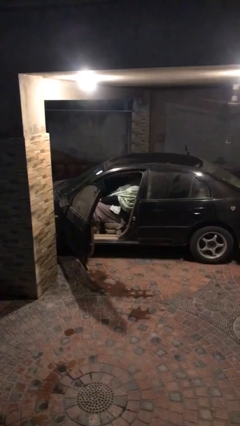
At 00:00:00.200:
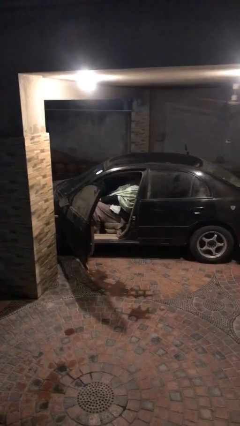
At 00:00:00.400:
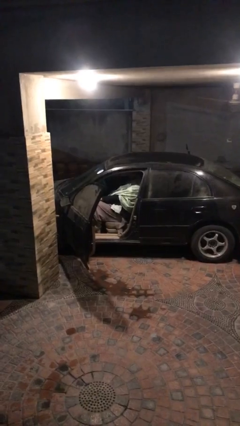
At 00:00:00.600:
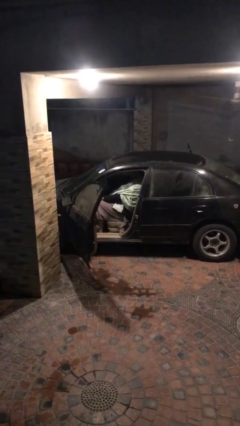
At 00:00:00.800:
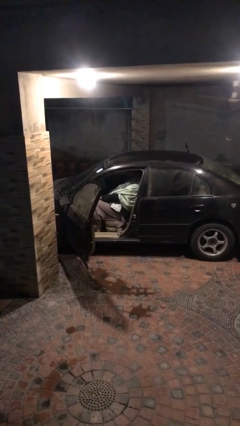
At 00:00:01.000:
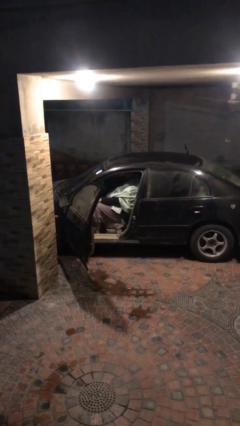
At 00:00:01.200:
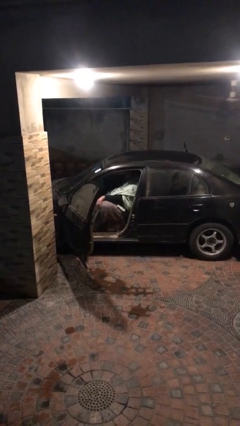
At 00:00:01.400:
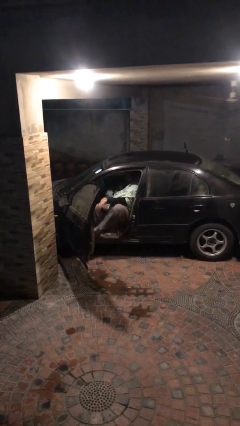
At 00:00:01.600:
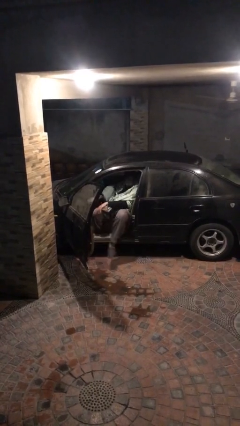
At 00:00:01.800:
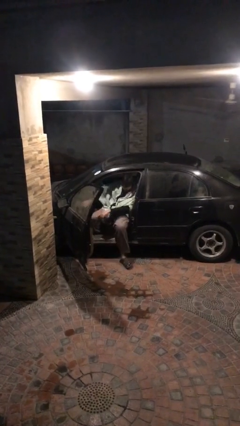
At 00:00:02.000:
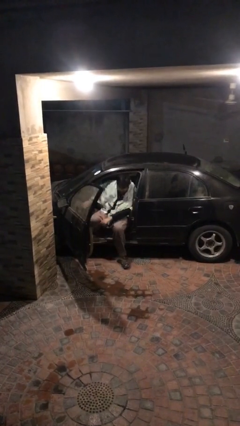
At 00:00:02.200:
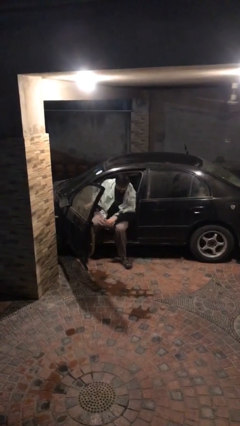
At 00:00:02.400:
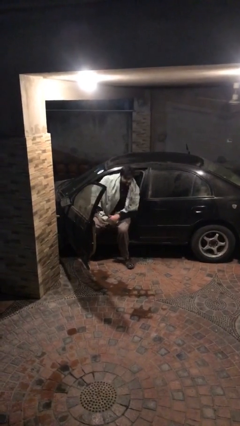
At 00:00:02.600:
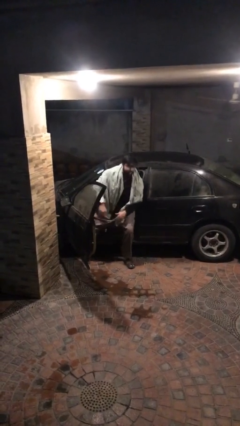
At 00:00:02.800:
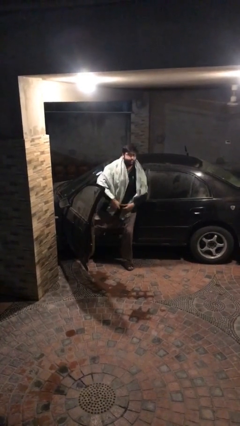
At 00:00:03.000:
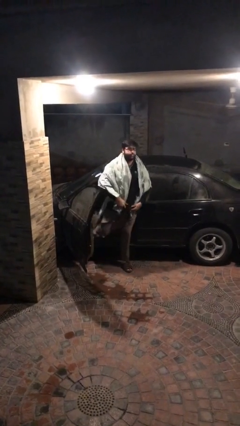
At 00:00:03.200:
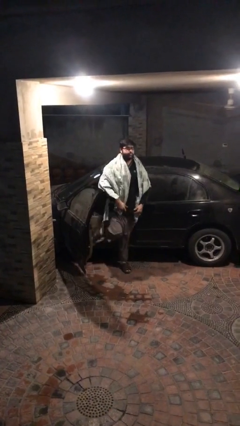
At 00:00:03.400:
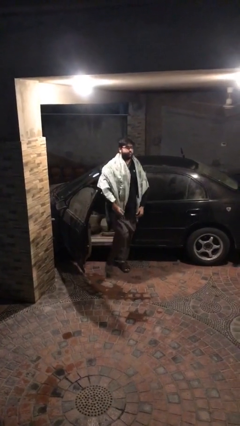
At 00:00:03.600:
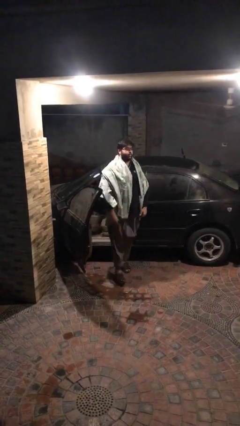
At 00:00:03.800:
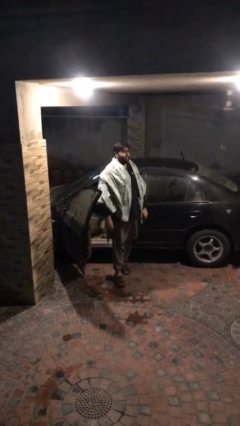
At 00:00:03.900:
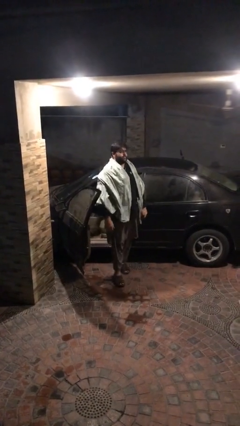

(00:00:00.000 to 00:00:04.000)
person exits car

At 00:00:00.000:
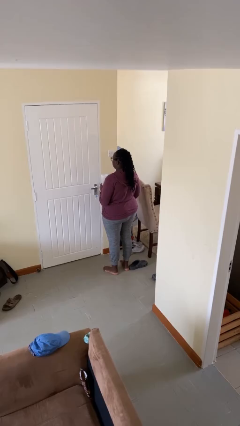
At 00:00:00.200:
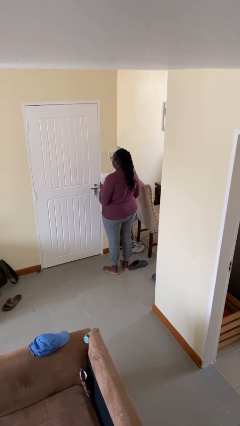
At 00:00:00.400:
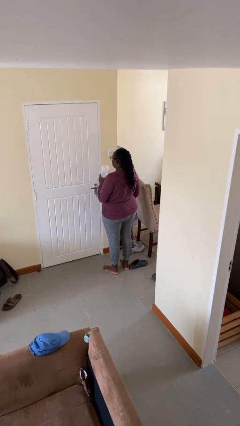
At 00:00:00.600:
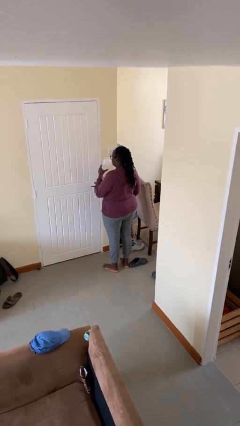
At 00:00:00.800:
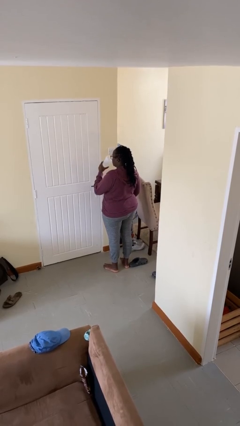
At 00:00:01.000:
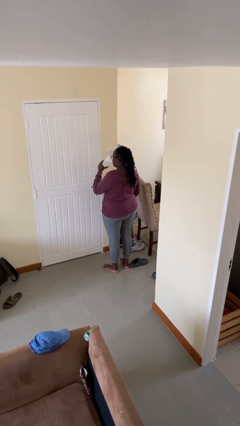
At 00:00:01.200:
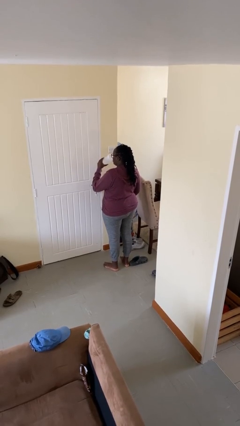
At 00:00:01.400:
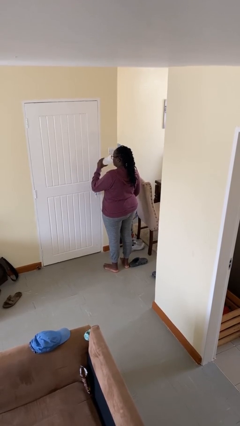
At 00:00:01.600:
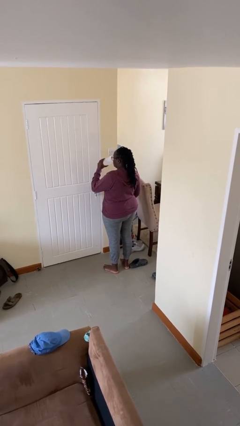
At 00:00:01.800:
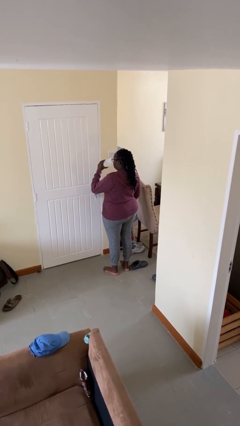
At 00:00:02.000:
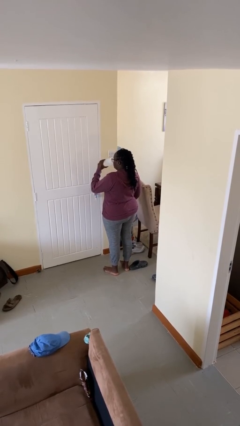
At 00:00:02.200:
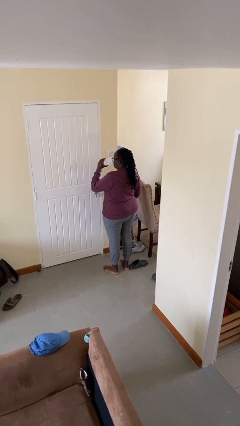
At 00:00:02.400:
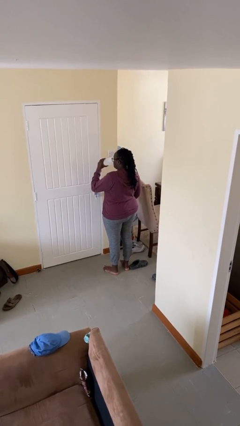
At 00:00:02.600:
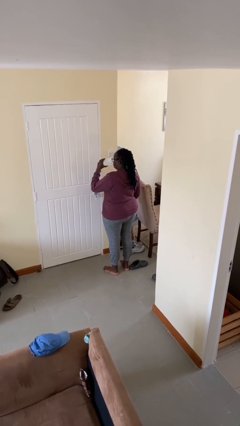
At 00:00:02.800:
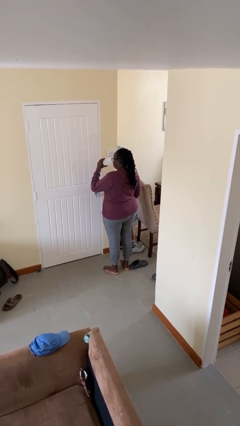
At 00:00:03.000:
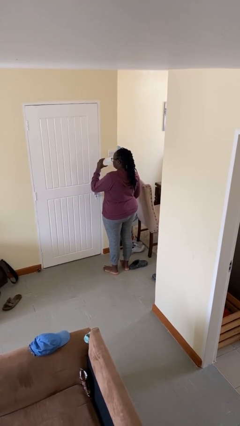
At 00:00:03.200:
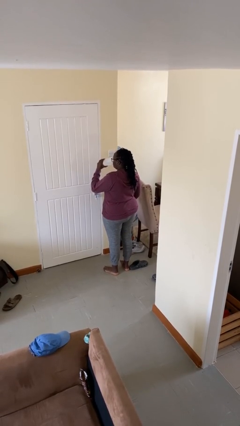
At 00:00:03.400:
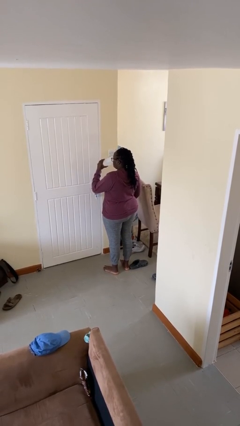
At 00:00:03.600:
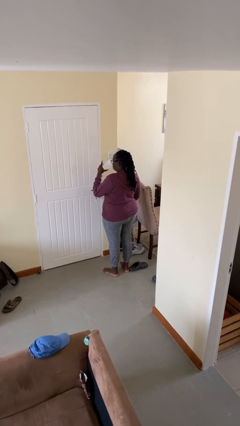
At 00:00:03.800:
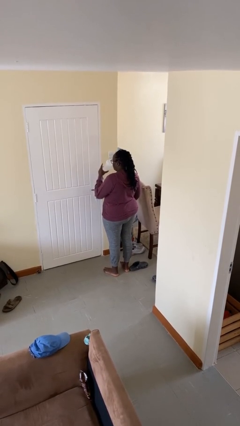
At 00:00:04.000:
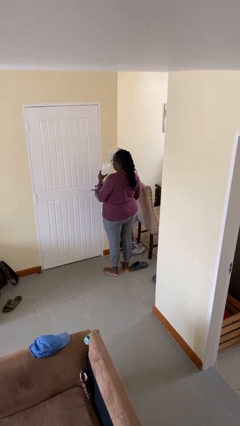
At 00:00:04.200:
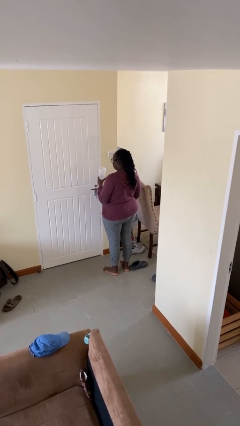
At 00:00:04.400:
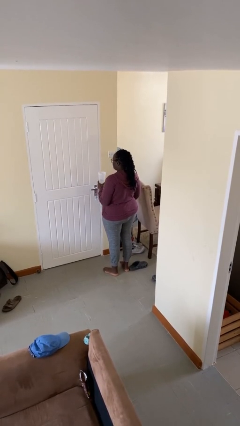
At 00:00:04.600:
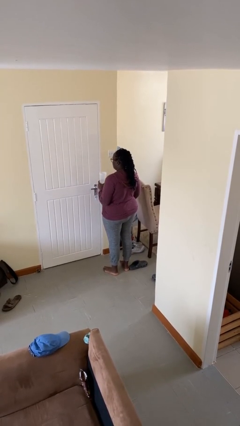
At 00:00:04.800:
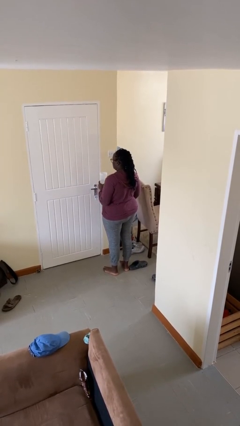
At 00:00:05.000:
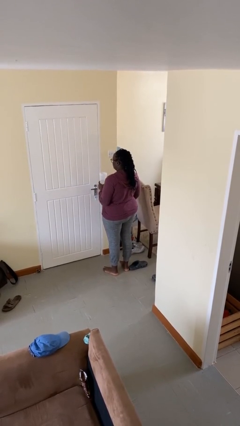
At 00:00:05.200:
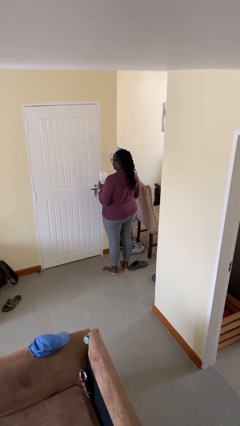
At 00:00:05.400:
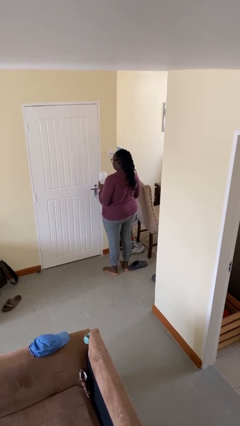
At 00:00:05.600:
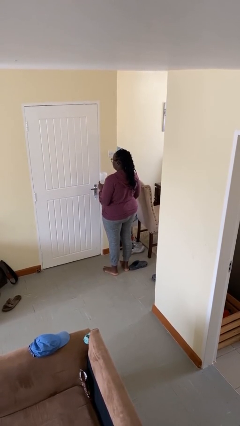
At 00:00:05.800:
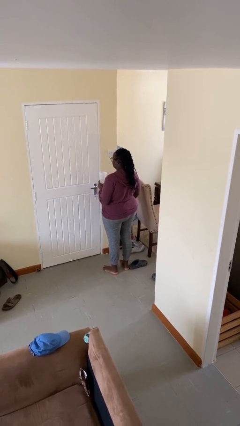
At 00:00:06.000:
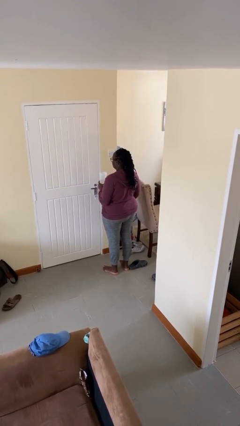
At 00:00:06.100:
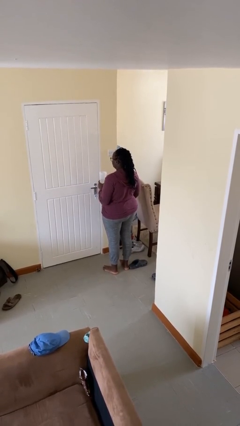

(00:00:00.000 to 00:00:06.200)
person drinks from bottle

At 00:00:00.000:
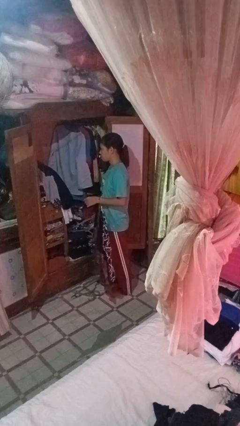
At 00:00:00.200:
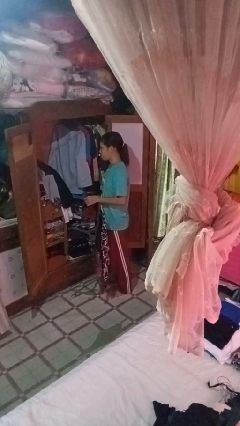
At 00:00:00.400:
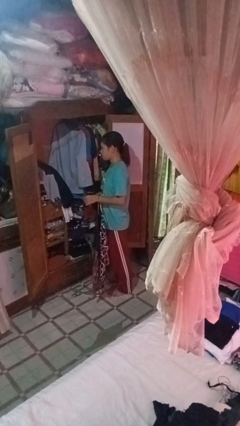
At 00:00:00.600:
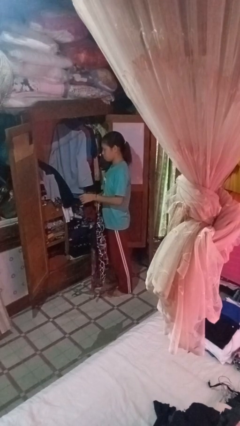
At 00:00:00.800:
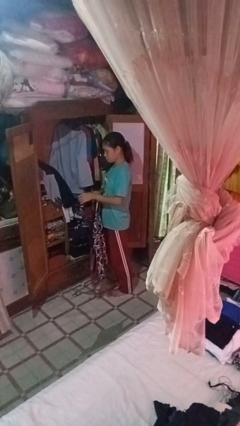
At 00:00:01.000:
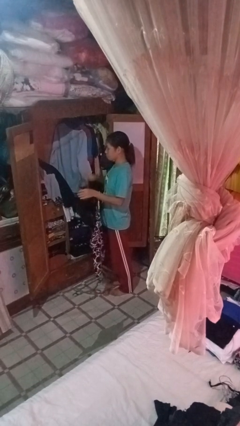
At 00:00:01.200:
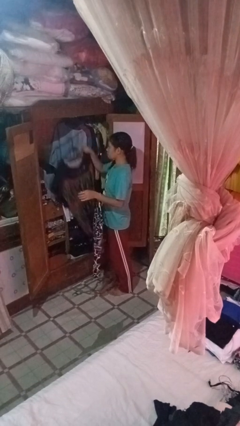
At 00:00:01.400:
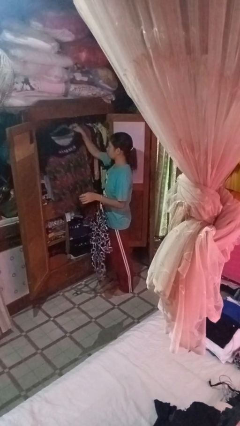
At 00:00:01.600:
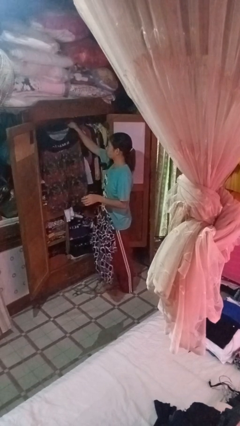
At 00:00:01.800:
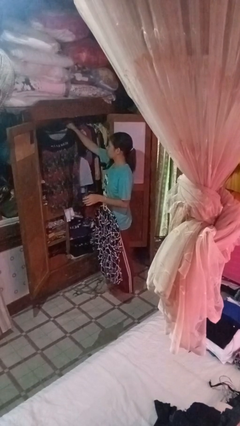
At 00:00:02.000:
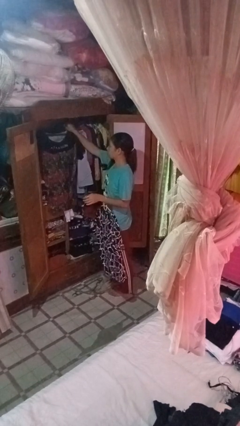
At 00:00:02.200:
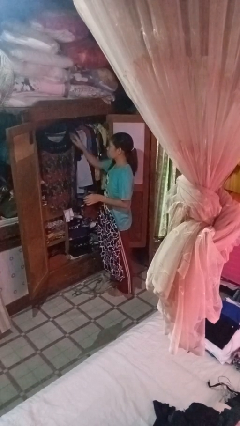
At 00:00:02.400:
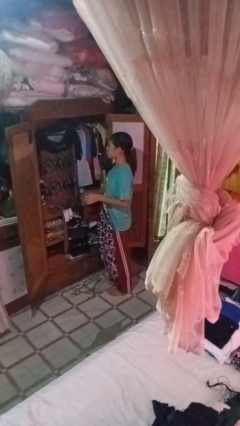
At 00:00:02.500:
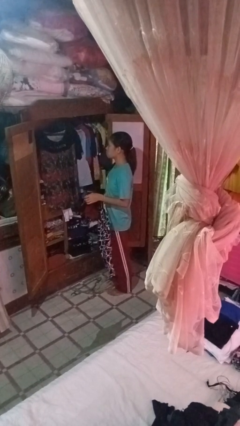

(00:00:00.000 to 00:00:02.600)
person puts clothes into closet

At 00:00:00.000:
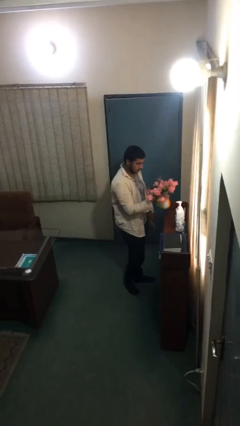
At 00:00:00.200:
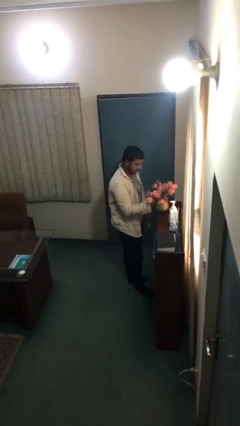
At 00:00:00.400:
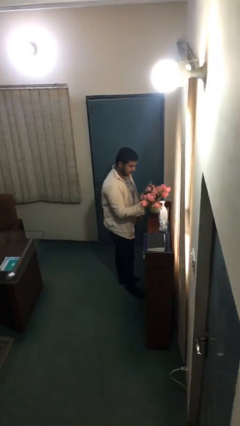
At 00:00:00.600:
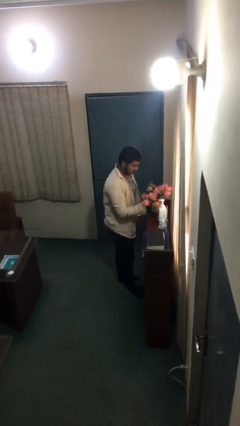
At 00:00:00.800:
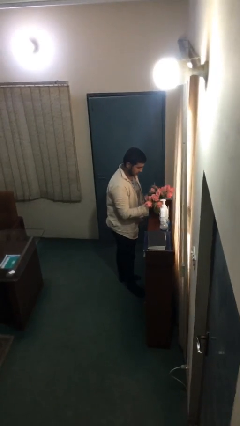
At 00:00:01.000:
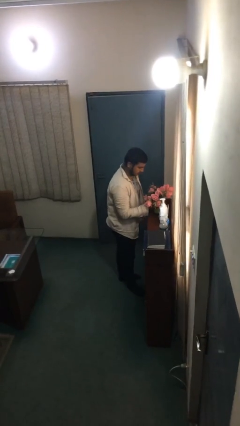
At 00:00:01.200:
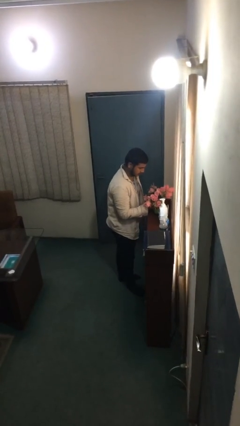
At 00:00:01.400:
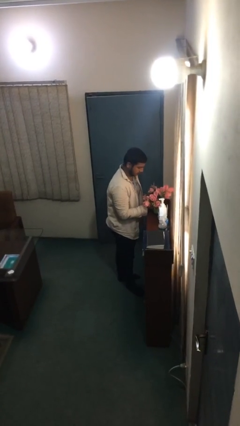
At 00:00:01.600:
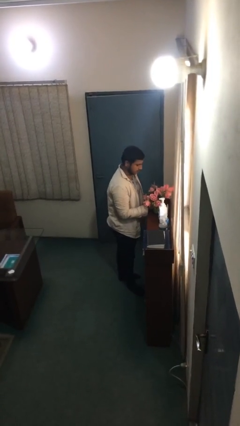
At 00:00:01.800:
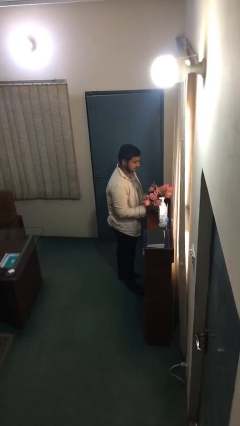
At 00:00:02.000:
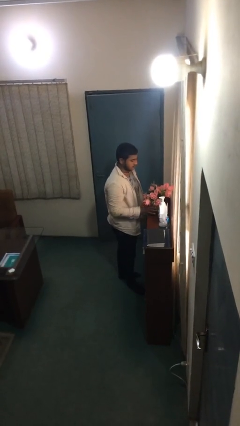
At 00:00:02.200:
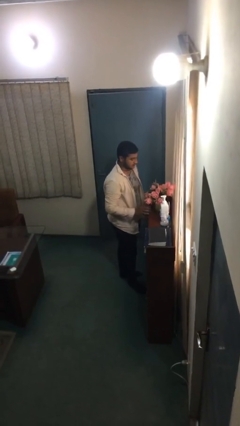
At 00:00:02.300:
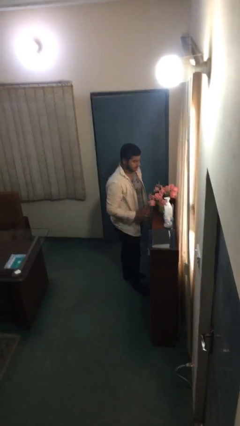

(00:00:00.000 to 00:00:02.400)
person puts down object on shelf

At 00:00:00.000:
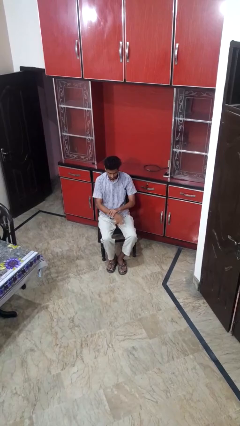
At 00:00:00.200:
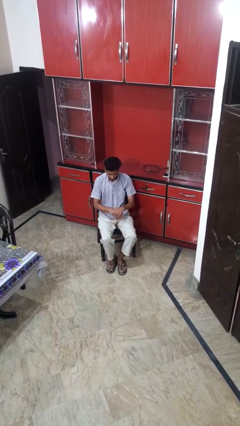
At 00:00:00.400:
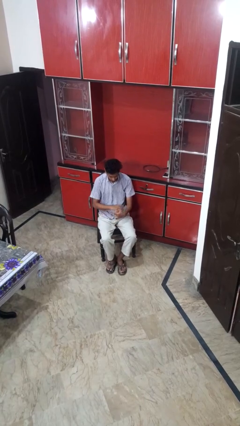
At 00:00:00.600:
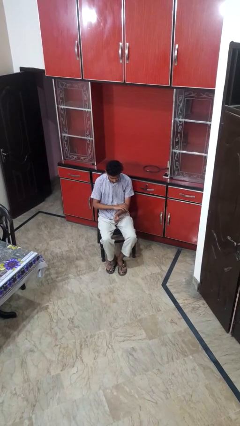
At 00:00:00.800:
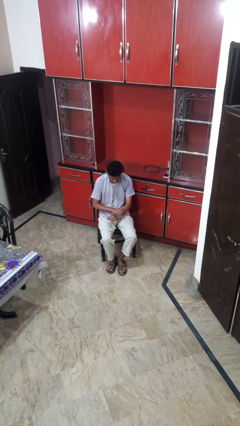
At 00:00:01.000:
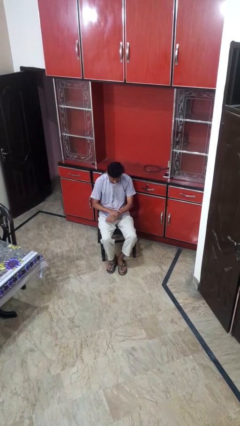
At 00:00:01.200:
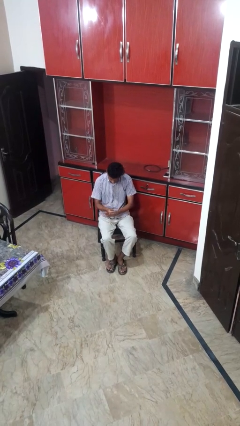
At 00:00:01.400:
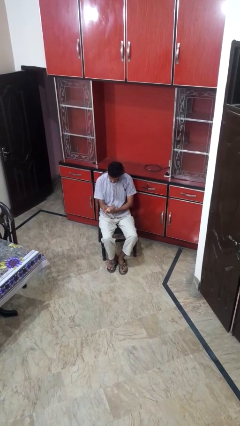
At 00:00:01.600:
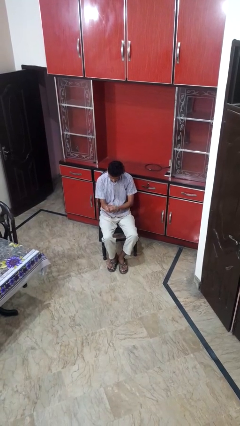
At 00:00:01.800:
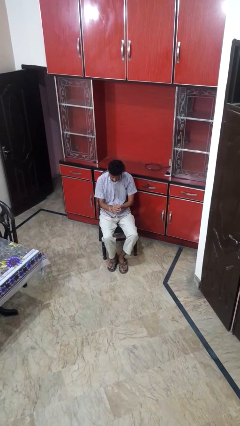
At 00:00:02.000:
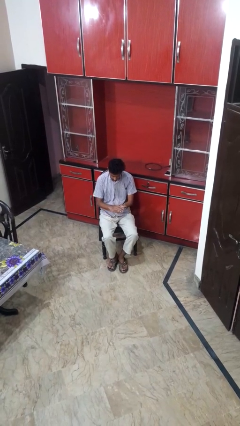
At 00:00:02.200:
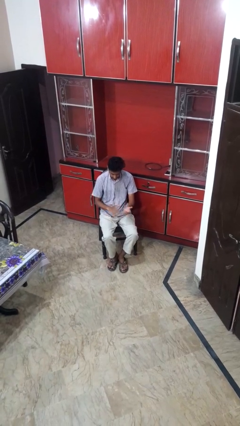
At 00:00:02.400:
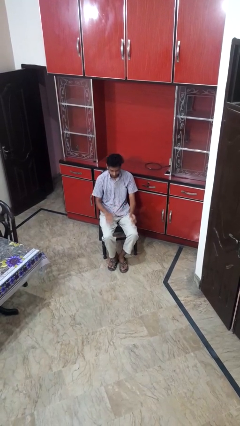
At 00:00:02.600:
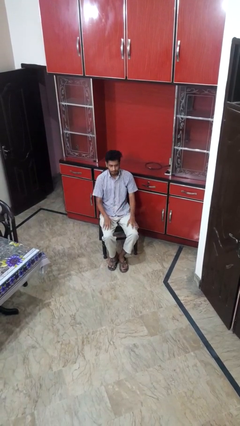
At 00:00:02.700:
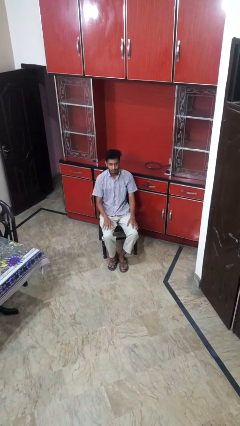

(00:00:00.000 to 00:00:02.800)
person looks at hands in lap
